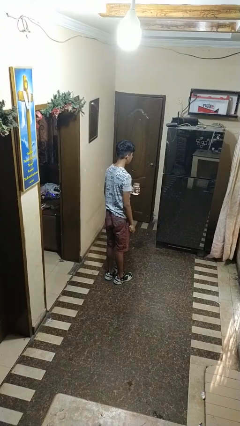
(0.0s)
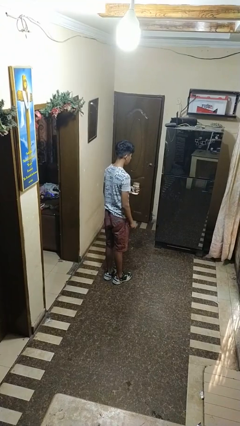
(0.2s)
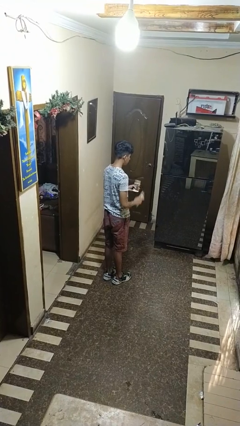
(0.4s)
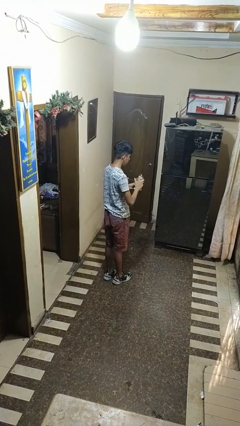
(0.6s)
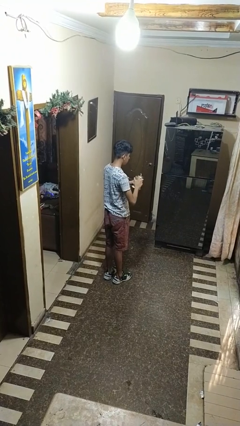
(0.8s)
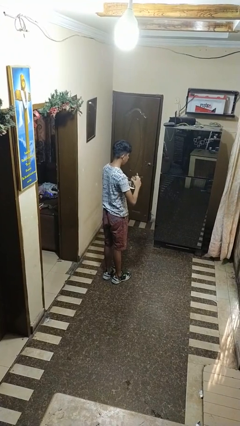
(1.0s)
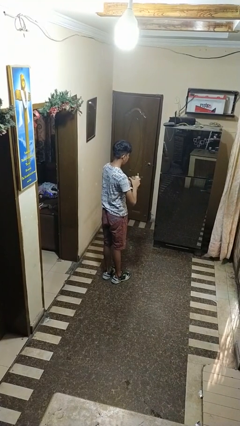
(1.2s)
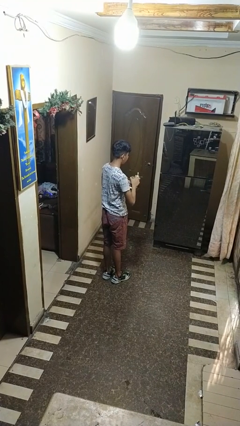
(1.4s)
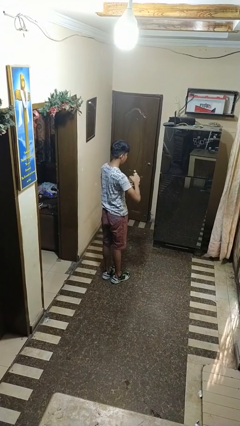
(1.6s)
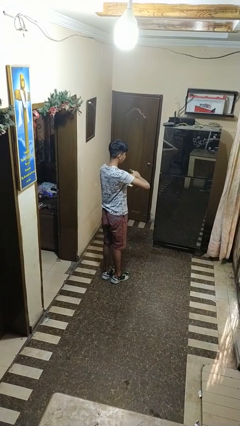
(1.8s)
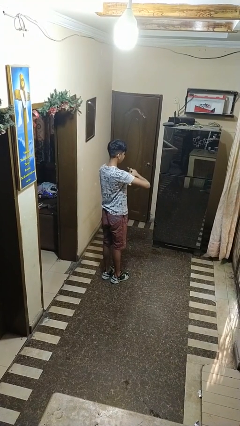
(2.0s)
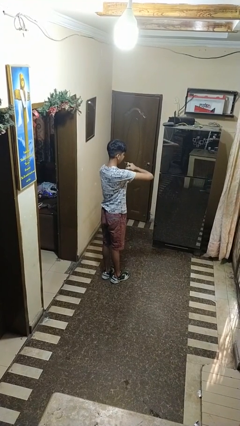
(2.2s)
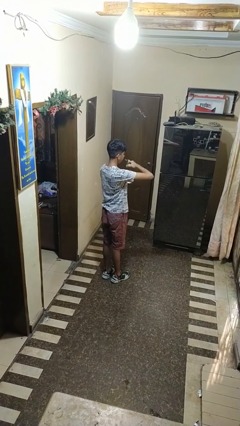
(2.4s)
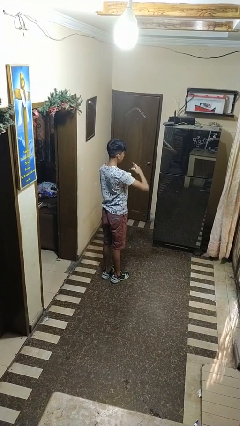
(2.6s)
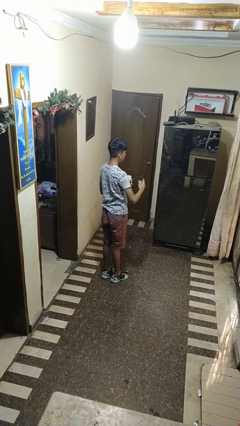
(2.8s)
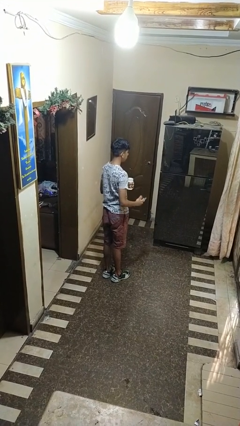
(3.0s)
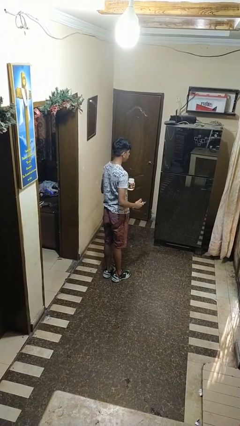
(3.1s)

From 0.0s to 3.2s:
person opens can with can opener

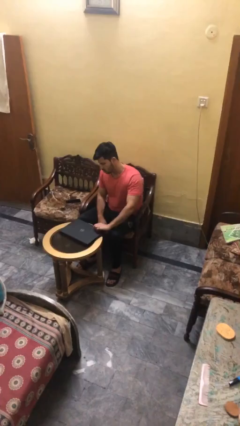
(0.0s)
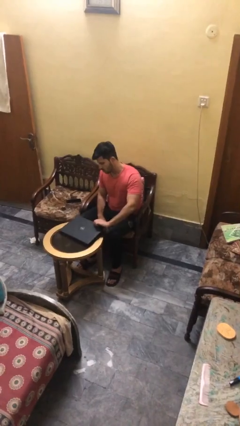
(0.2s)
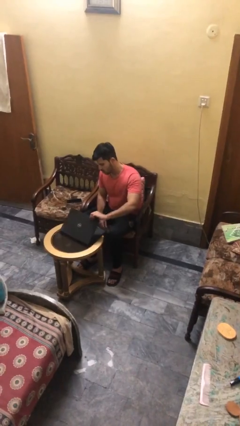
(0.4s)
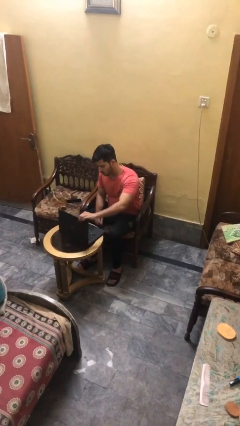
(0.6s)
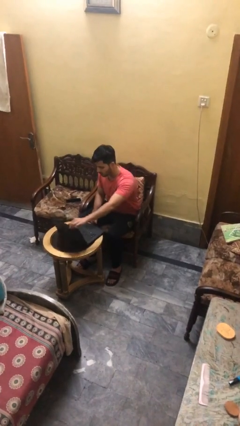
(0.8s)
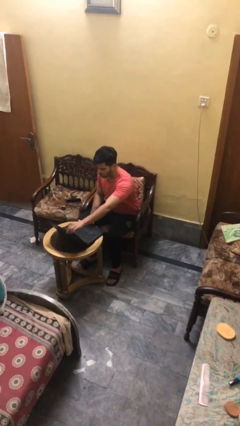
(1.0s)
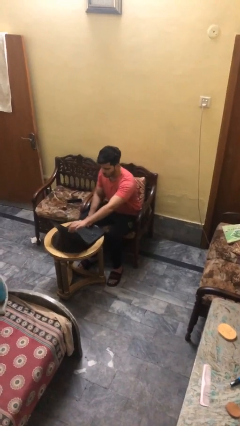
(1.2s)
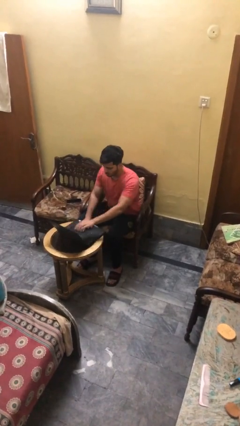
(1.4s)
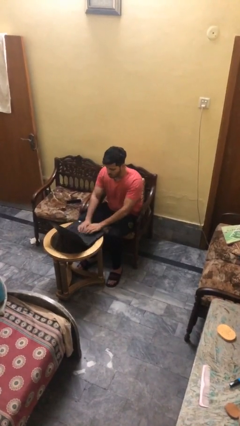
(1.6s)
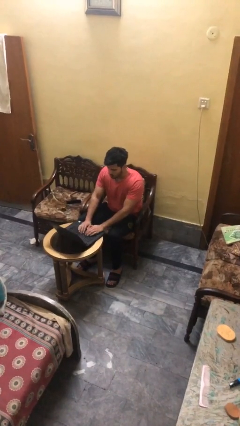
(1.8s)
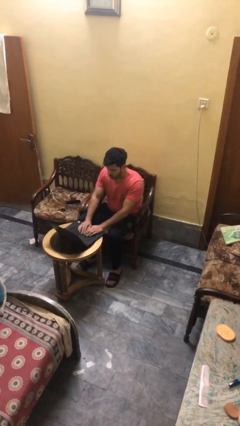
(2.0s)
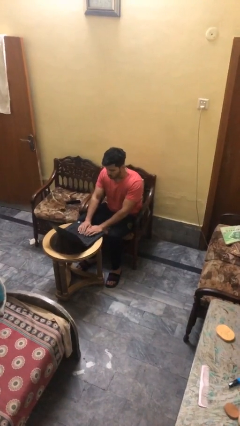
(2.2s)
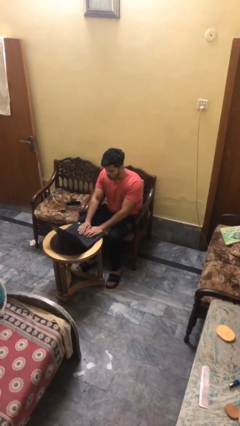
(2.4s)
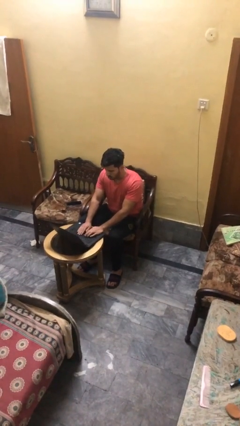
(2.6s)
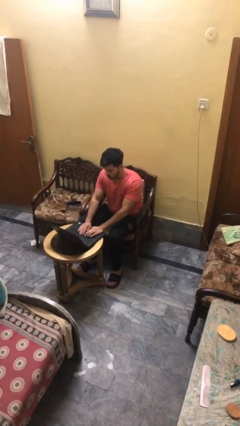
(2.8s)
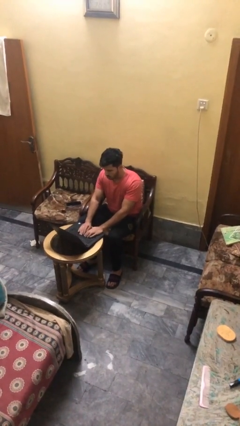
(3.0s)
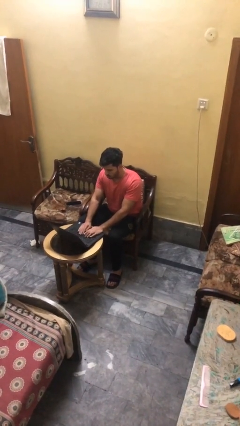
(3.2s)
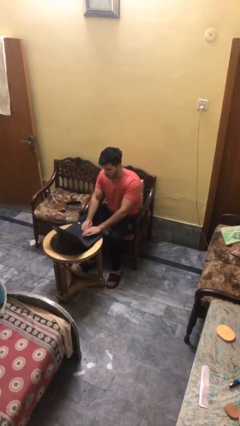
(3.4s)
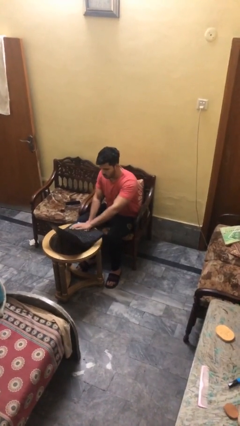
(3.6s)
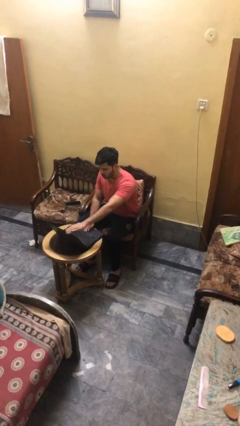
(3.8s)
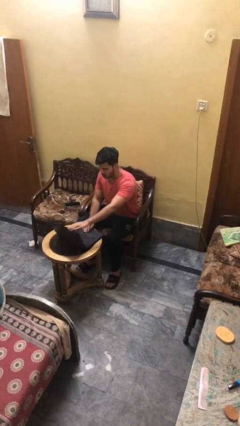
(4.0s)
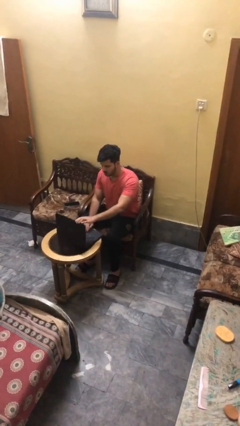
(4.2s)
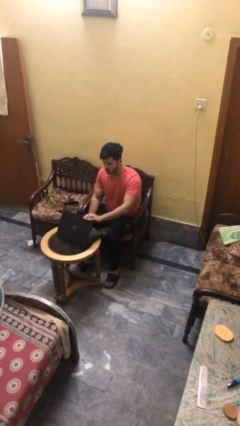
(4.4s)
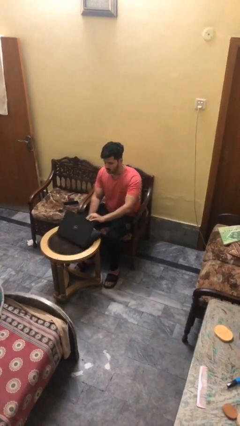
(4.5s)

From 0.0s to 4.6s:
person interacts with laptop

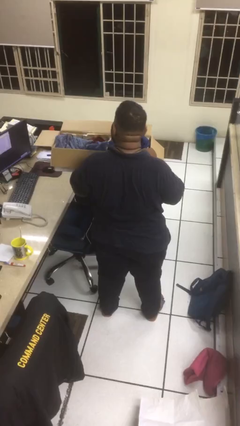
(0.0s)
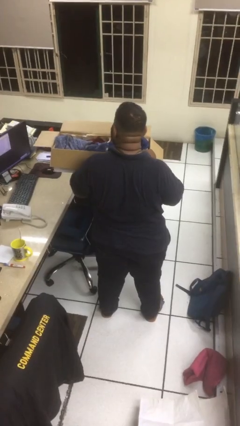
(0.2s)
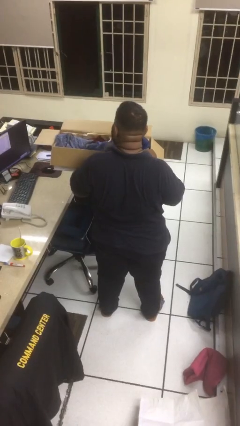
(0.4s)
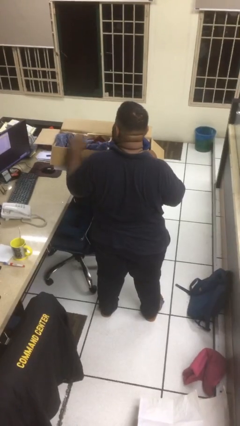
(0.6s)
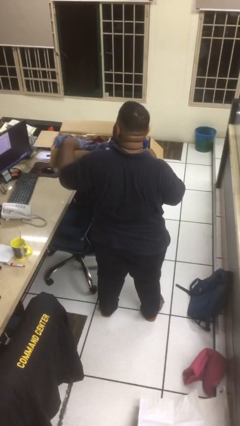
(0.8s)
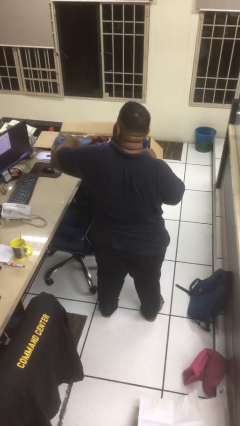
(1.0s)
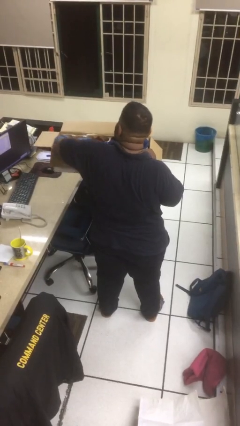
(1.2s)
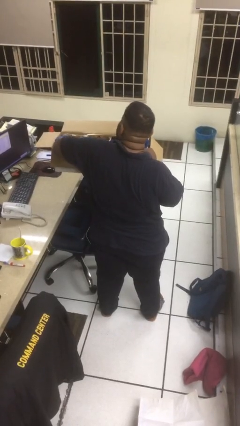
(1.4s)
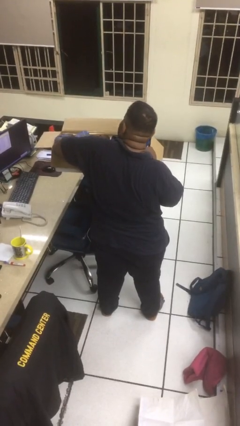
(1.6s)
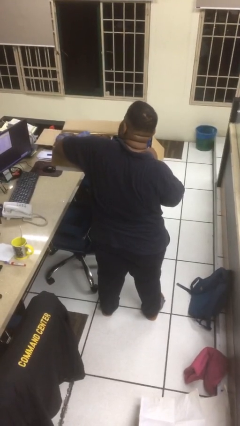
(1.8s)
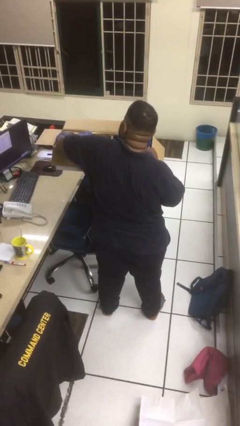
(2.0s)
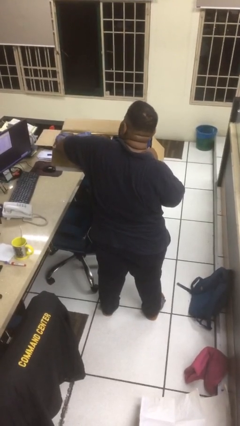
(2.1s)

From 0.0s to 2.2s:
person searches in box

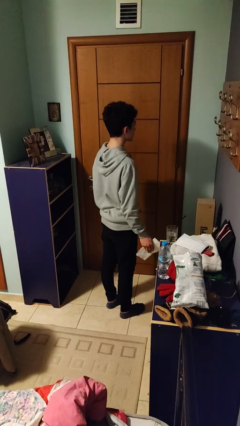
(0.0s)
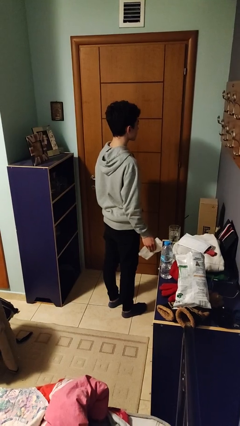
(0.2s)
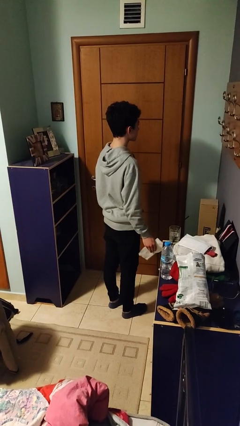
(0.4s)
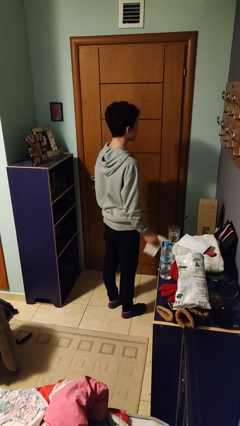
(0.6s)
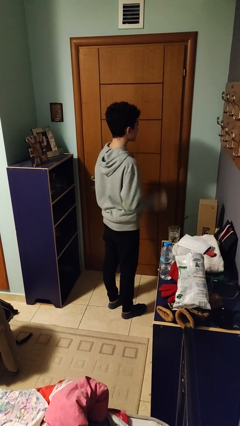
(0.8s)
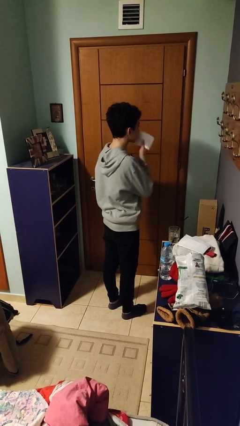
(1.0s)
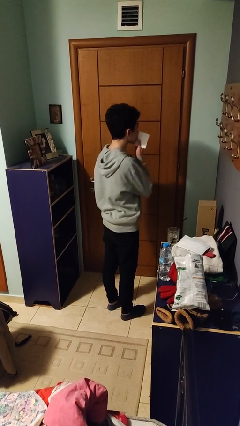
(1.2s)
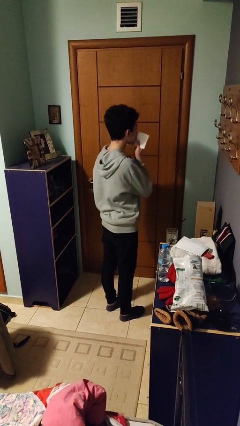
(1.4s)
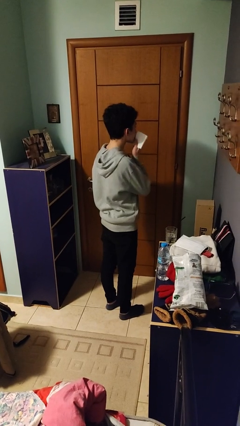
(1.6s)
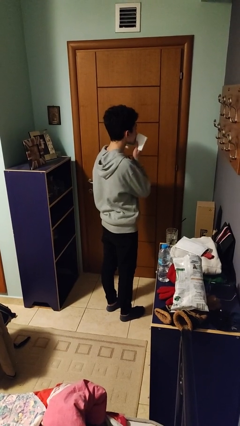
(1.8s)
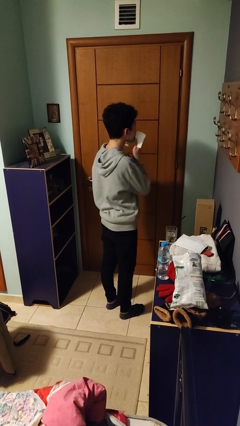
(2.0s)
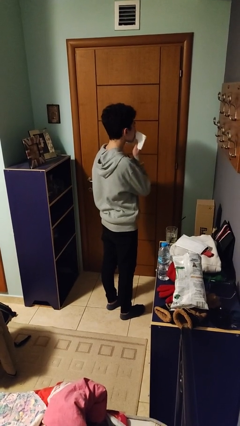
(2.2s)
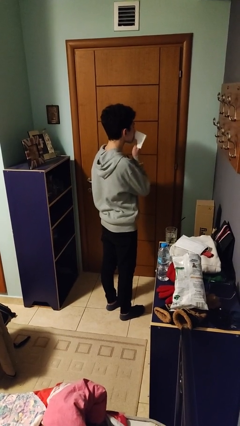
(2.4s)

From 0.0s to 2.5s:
person wipes mouth with napkin

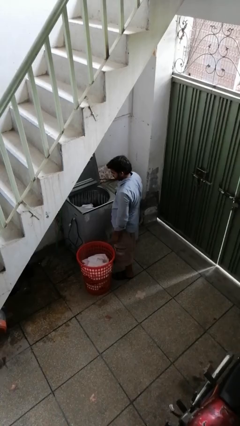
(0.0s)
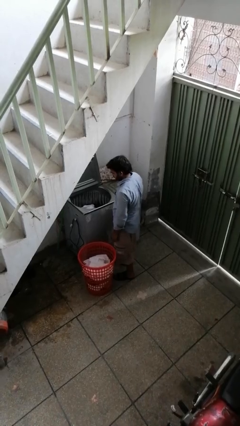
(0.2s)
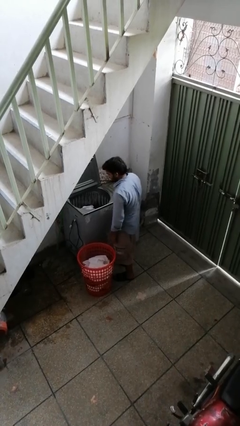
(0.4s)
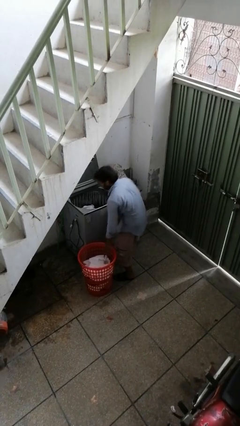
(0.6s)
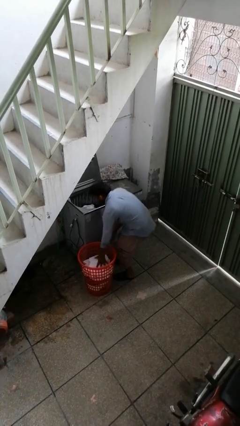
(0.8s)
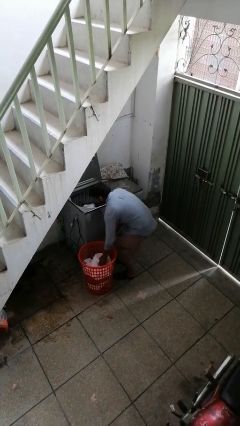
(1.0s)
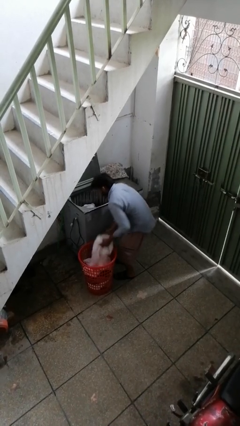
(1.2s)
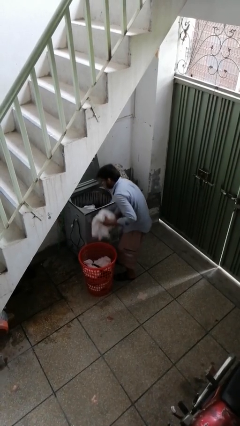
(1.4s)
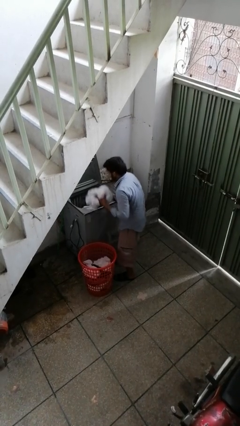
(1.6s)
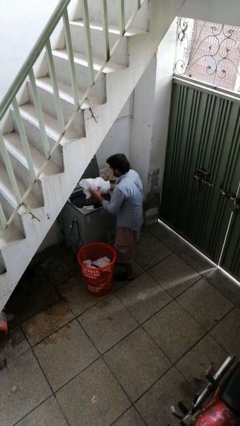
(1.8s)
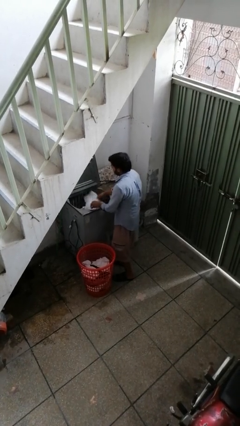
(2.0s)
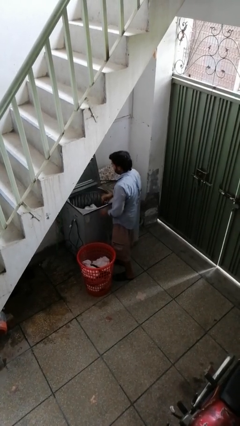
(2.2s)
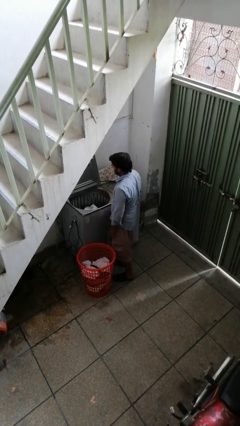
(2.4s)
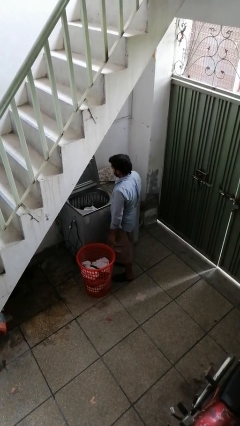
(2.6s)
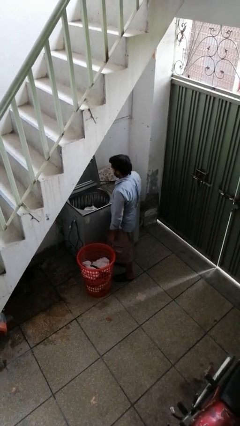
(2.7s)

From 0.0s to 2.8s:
person loads clotheswasher

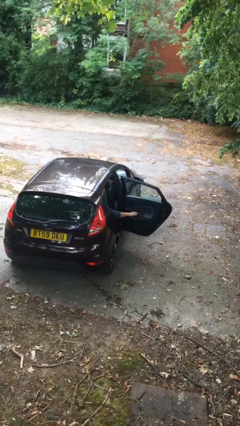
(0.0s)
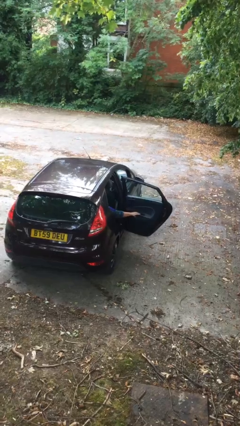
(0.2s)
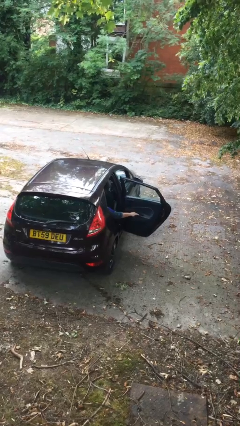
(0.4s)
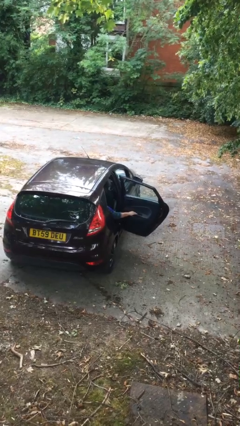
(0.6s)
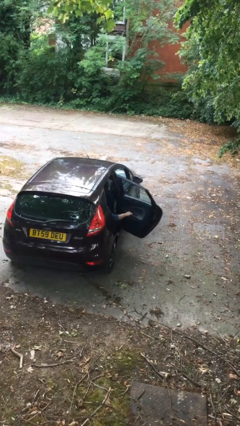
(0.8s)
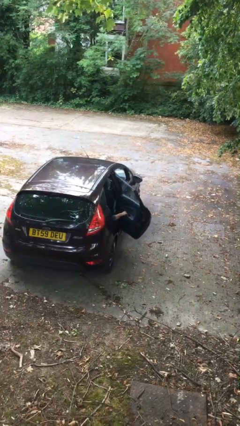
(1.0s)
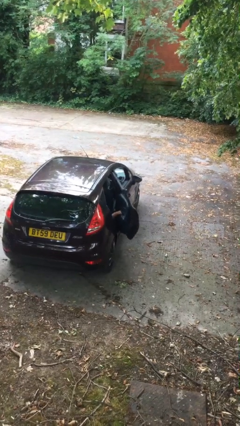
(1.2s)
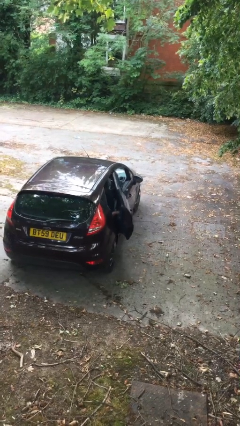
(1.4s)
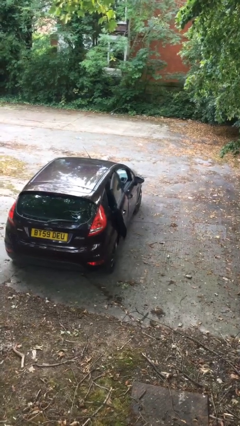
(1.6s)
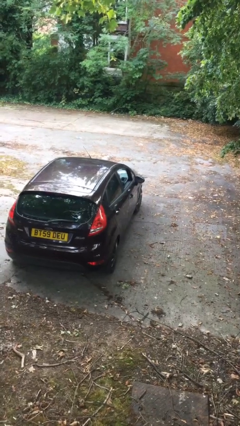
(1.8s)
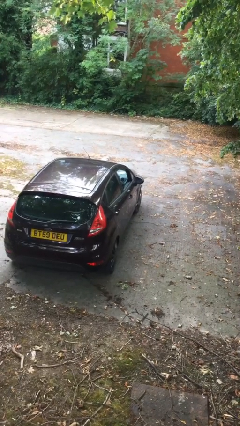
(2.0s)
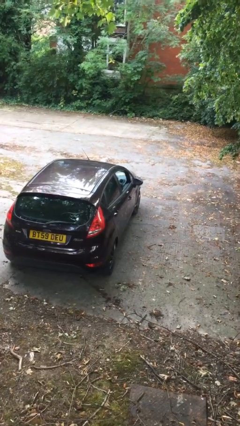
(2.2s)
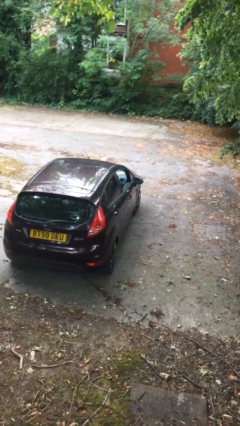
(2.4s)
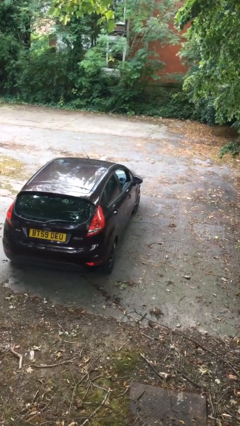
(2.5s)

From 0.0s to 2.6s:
person closes car door
